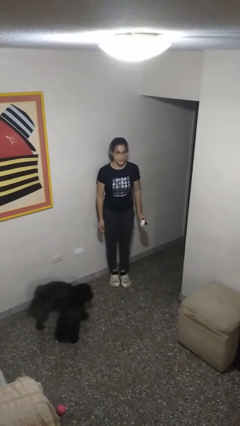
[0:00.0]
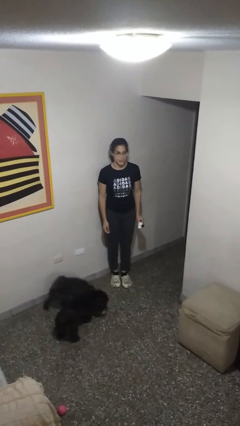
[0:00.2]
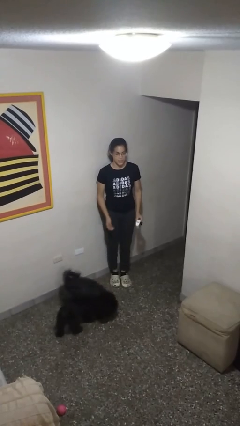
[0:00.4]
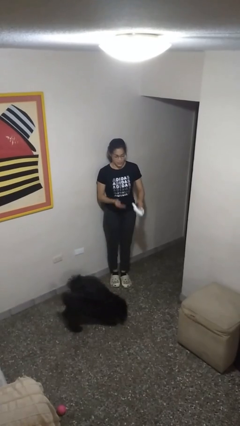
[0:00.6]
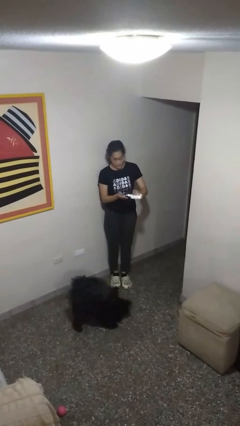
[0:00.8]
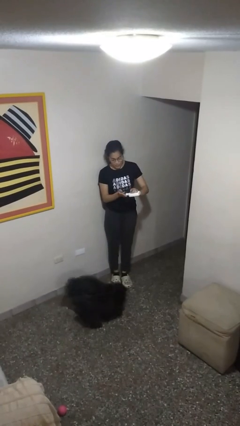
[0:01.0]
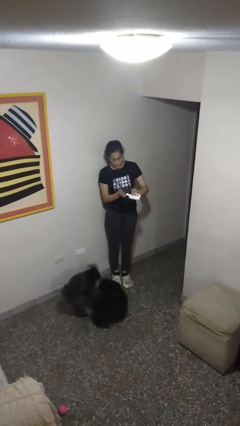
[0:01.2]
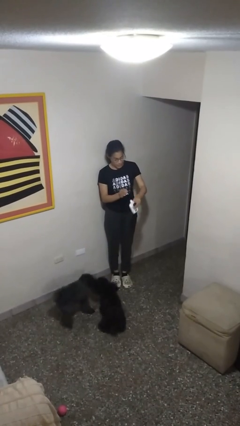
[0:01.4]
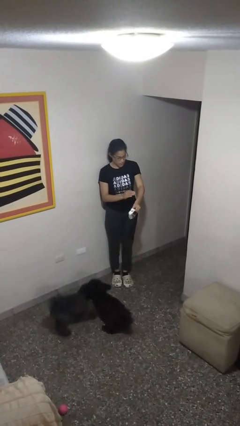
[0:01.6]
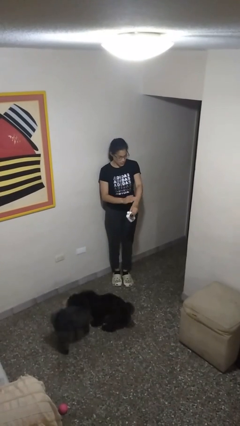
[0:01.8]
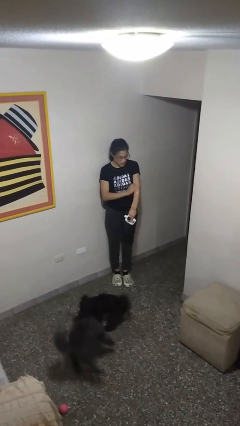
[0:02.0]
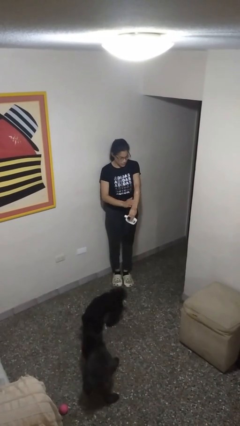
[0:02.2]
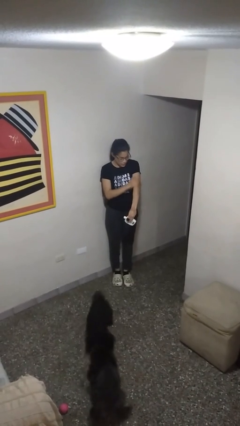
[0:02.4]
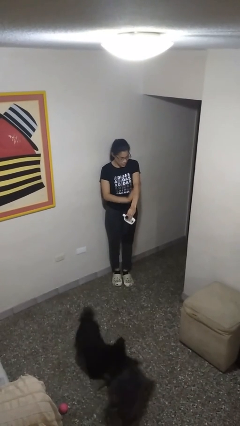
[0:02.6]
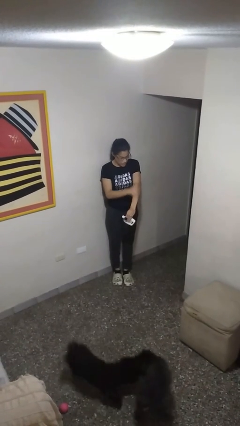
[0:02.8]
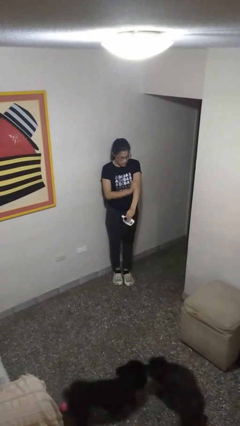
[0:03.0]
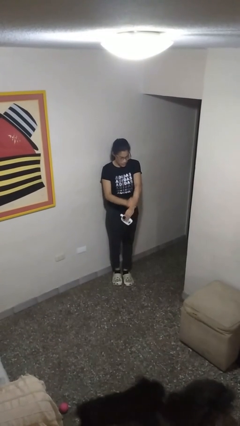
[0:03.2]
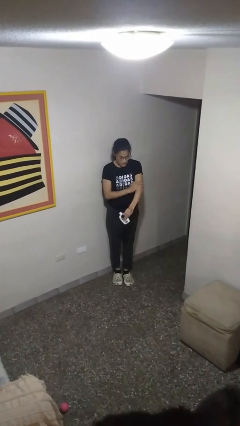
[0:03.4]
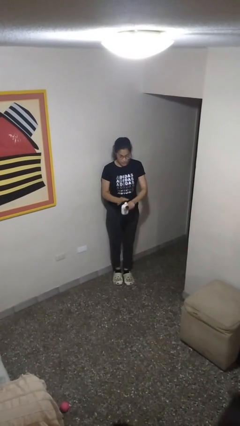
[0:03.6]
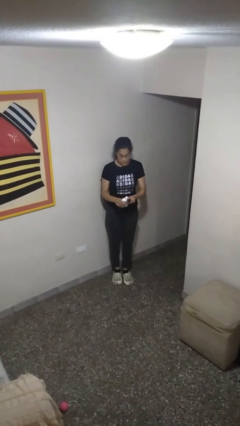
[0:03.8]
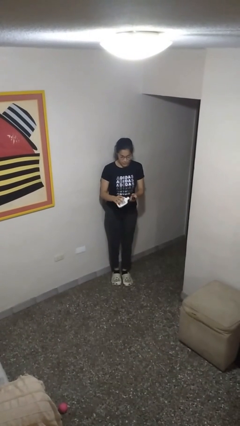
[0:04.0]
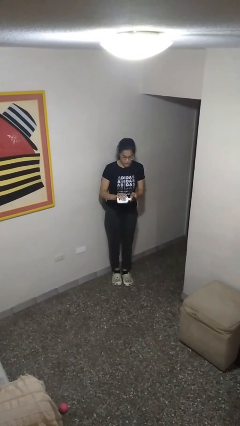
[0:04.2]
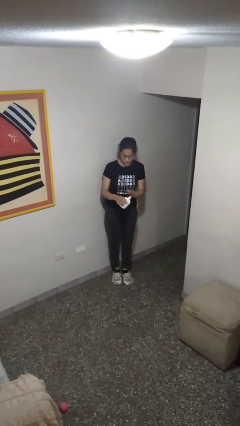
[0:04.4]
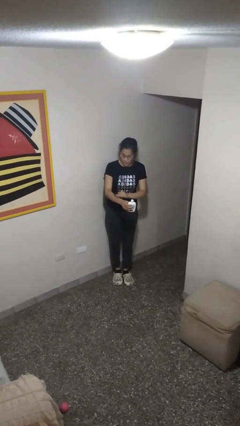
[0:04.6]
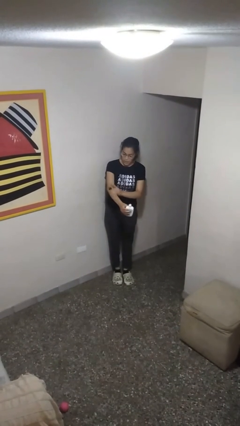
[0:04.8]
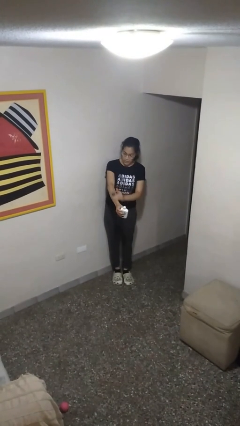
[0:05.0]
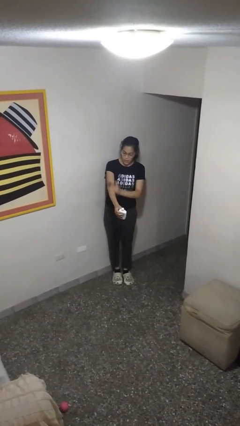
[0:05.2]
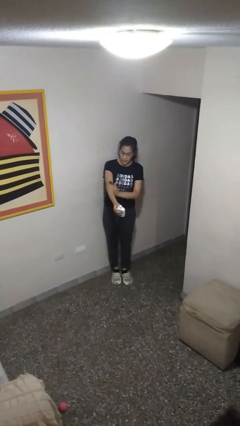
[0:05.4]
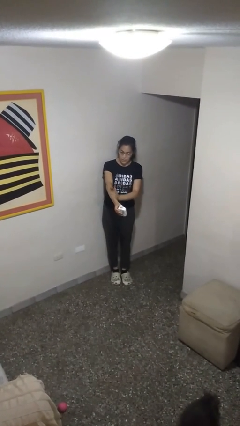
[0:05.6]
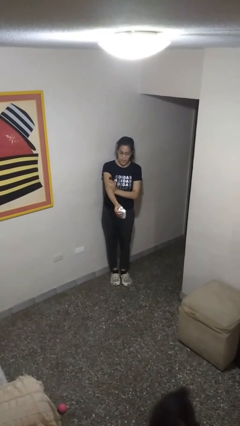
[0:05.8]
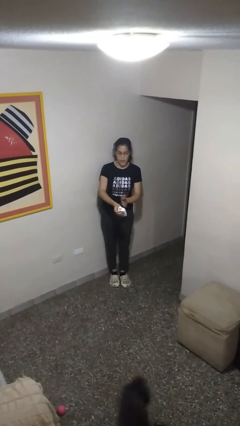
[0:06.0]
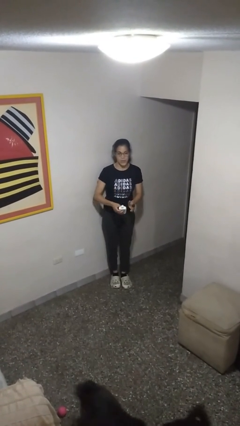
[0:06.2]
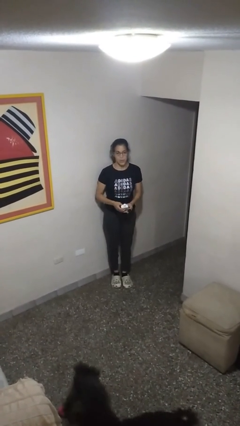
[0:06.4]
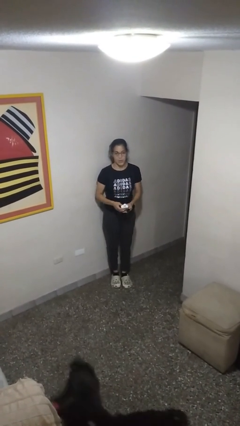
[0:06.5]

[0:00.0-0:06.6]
person applies sunscreen

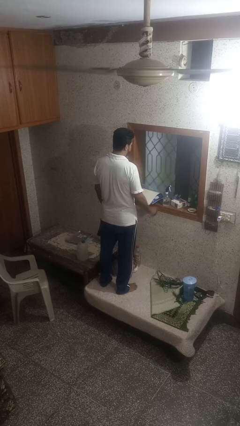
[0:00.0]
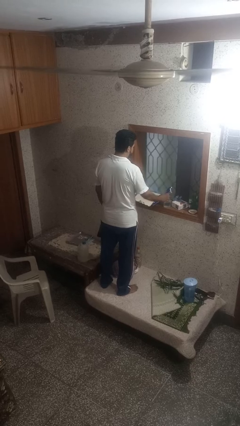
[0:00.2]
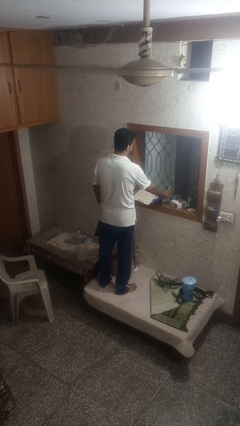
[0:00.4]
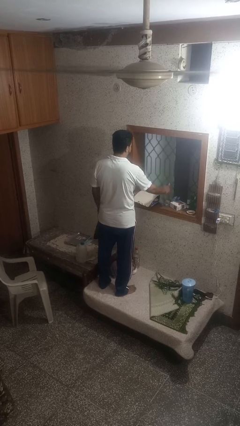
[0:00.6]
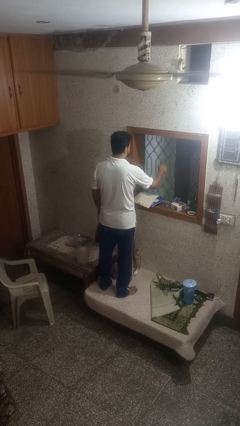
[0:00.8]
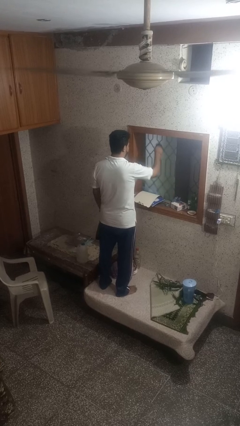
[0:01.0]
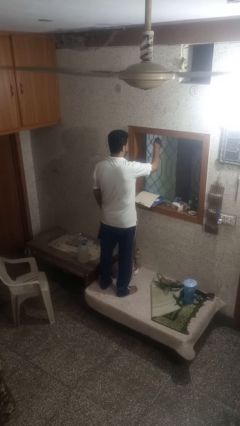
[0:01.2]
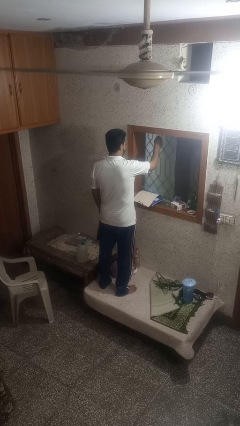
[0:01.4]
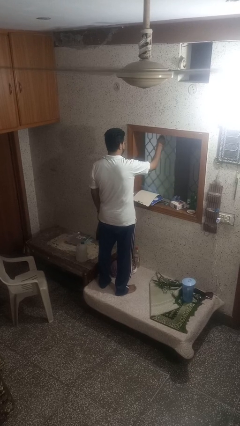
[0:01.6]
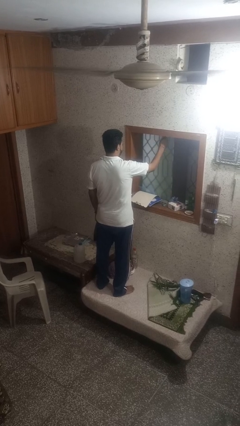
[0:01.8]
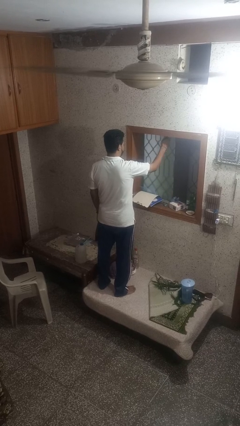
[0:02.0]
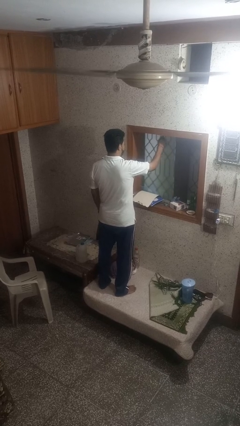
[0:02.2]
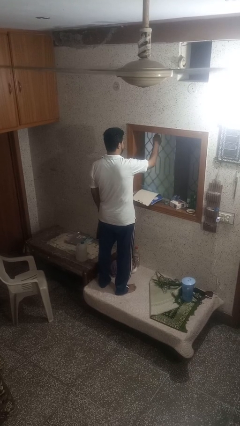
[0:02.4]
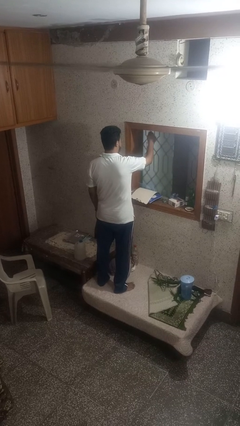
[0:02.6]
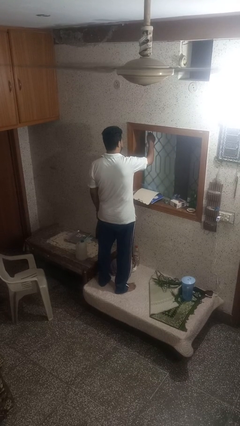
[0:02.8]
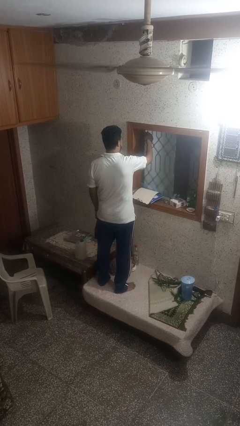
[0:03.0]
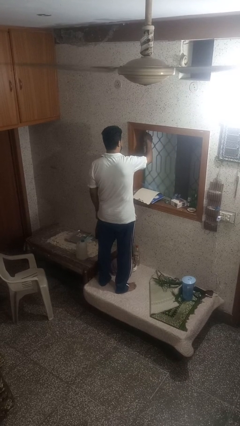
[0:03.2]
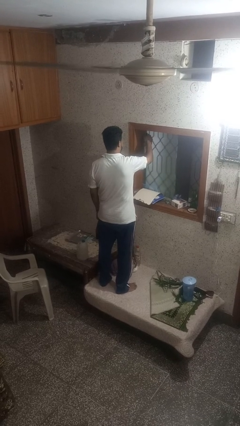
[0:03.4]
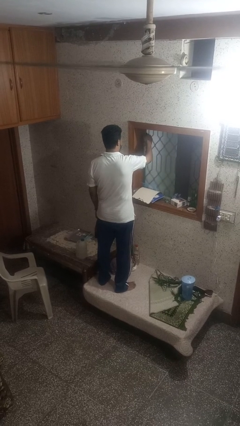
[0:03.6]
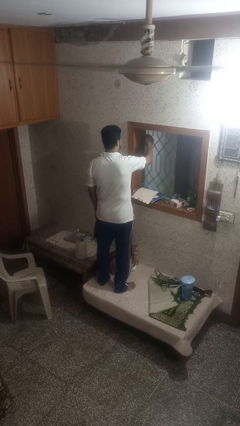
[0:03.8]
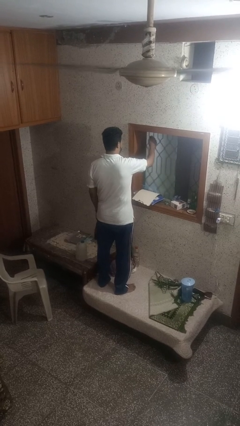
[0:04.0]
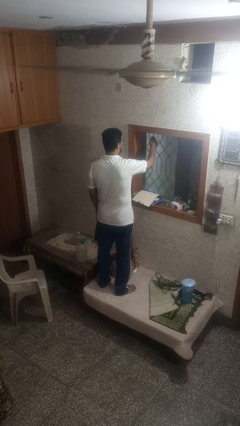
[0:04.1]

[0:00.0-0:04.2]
person sprays from bottle

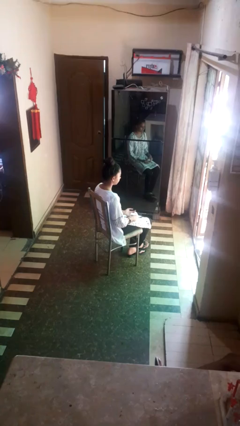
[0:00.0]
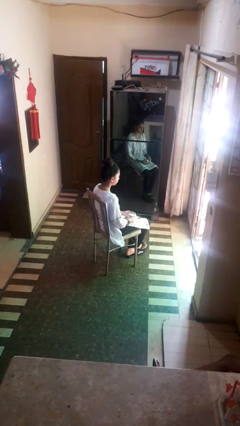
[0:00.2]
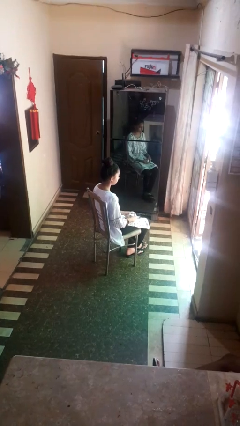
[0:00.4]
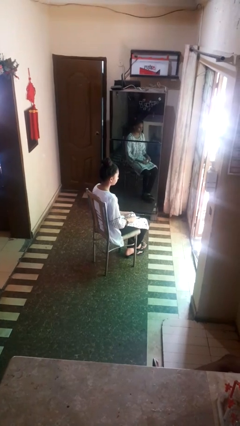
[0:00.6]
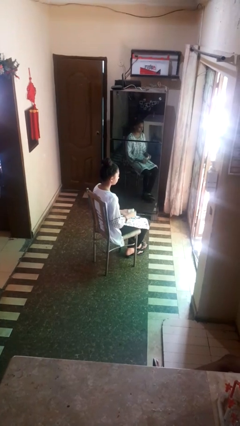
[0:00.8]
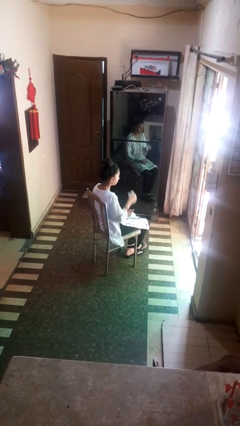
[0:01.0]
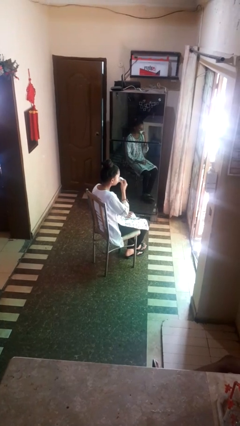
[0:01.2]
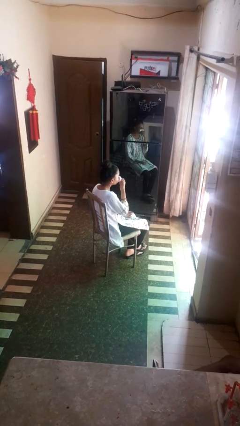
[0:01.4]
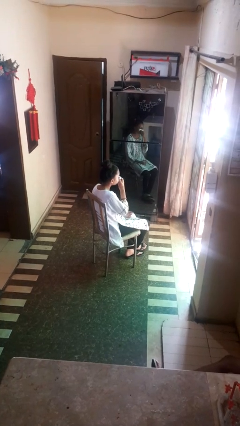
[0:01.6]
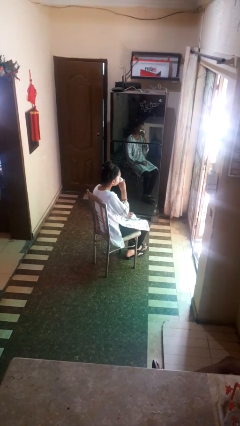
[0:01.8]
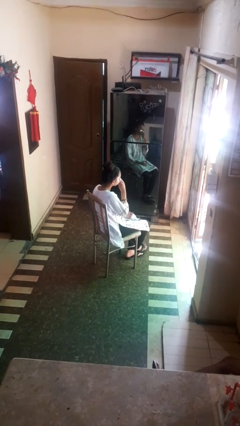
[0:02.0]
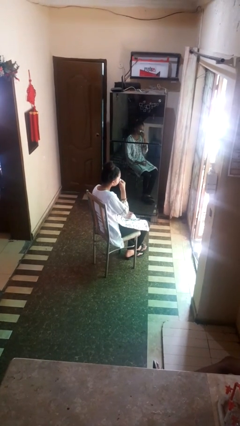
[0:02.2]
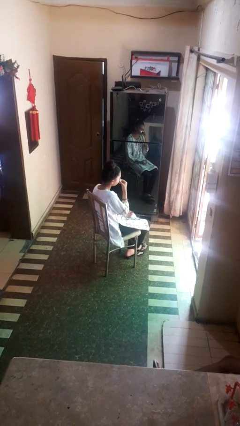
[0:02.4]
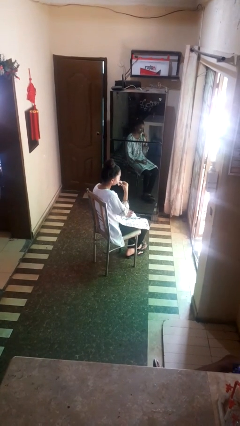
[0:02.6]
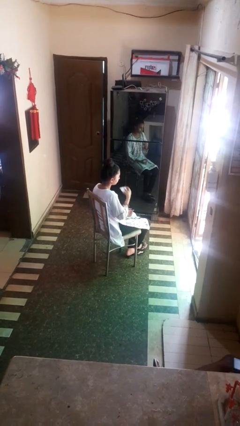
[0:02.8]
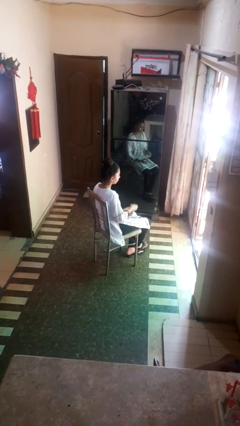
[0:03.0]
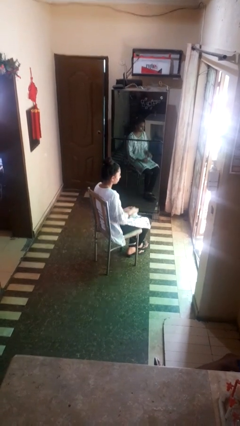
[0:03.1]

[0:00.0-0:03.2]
person blows nose

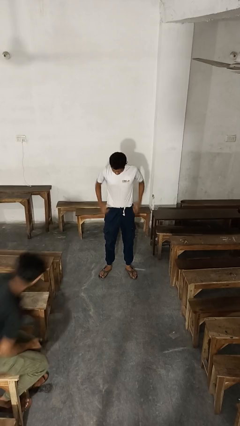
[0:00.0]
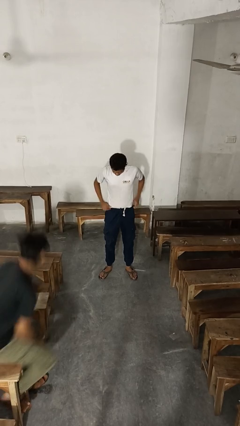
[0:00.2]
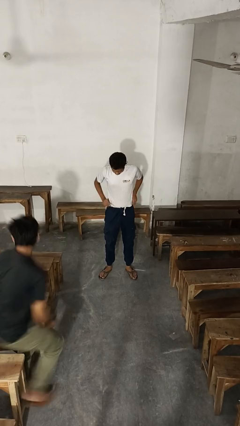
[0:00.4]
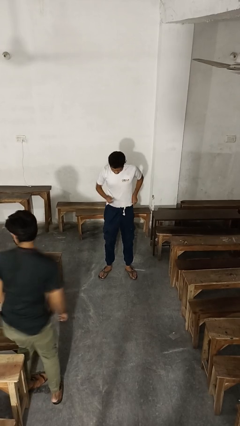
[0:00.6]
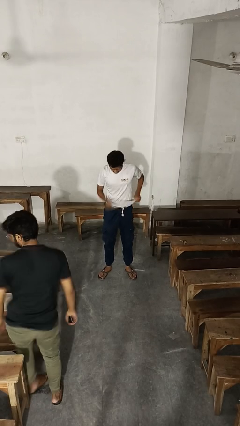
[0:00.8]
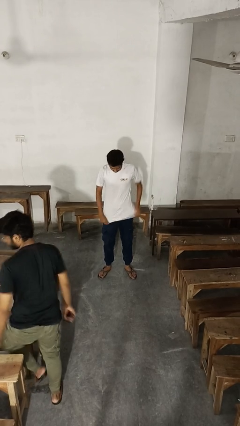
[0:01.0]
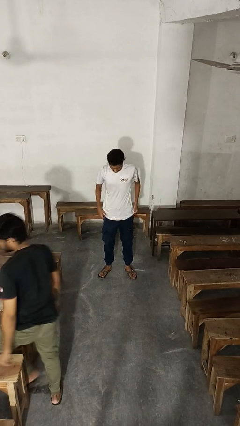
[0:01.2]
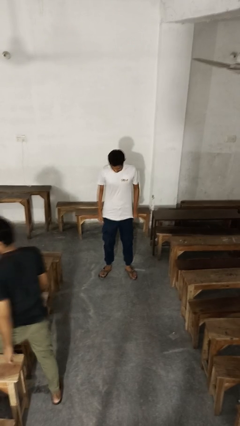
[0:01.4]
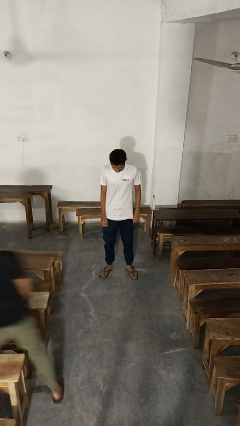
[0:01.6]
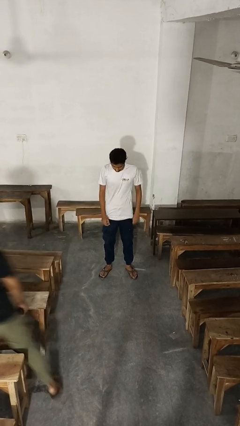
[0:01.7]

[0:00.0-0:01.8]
person untucks shirt

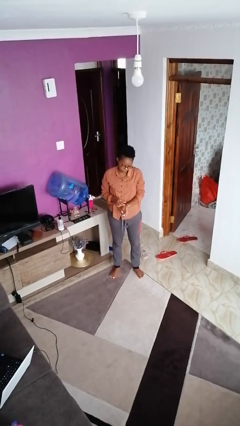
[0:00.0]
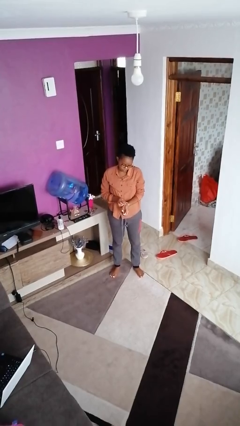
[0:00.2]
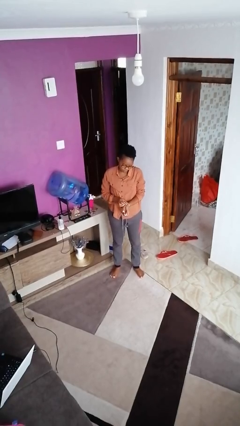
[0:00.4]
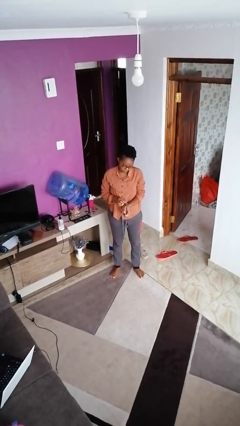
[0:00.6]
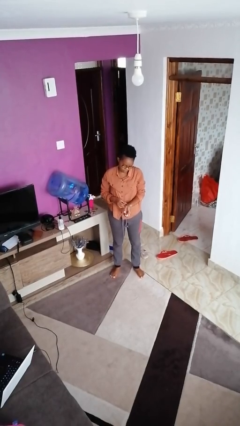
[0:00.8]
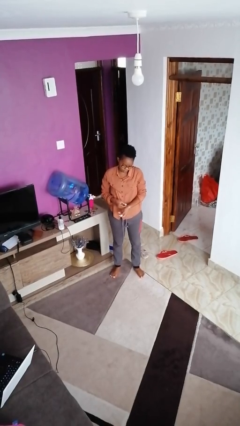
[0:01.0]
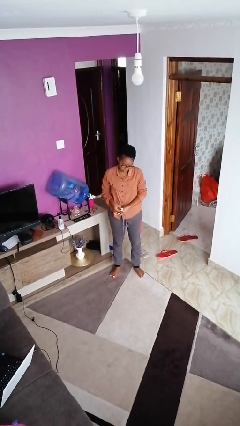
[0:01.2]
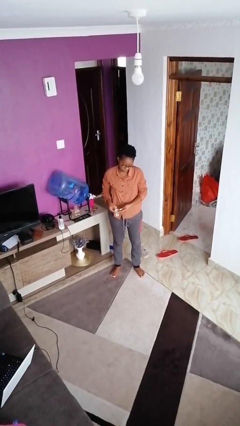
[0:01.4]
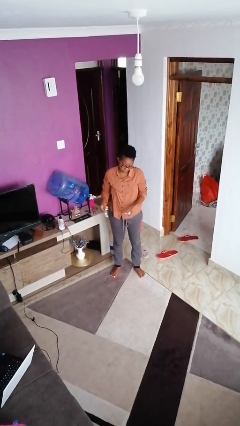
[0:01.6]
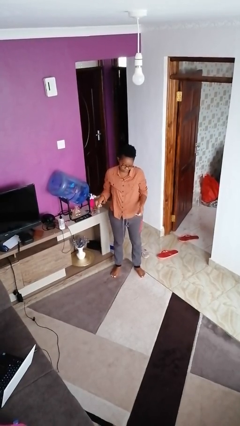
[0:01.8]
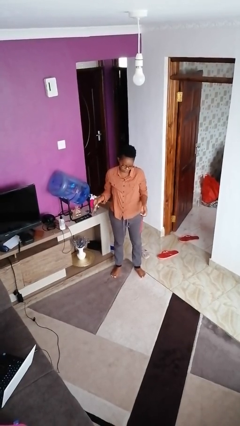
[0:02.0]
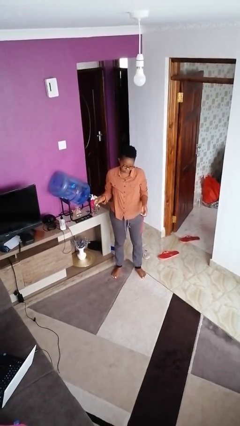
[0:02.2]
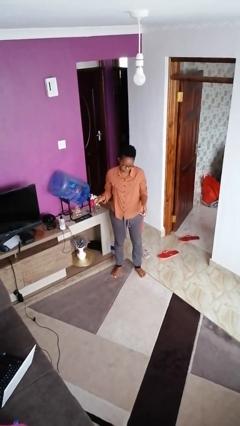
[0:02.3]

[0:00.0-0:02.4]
person takes off wristwatch
